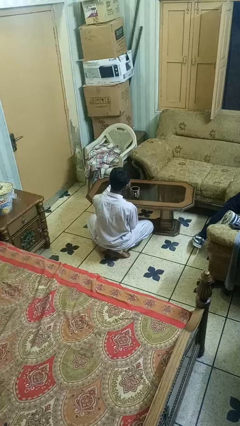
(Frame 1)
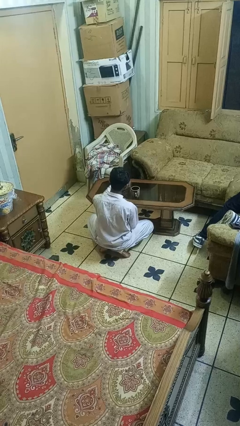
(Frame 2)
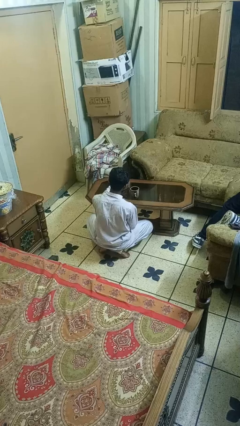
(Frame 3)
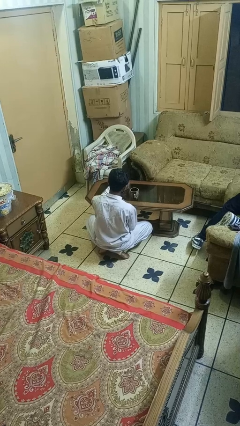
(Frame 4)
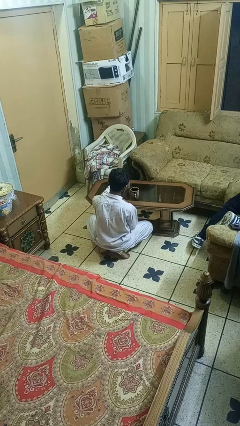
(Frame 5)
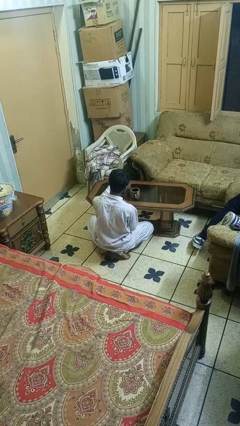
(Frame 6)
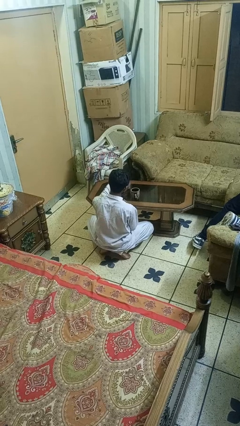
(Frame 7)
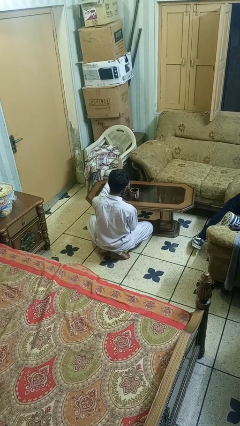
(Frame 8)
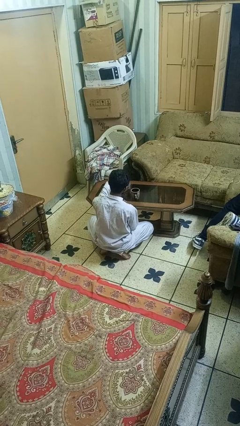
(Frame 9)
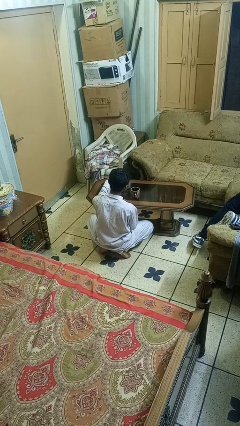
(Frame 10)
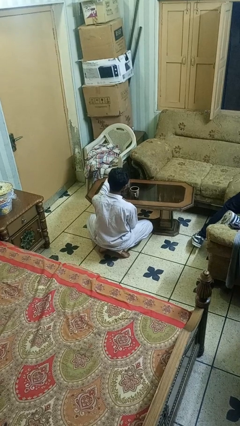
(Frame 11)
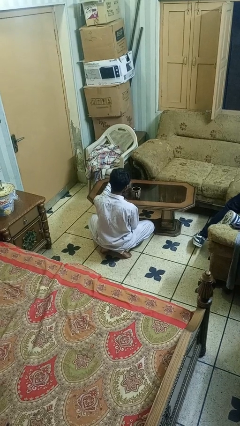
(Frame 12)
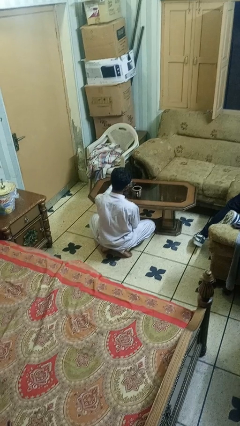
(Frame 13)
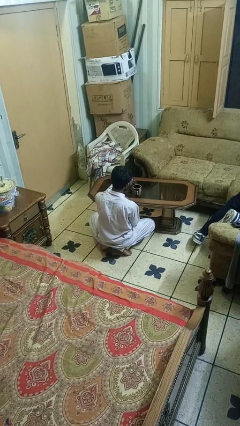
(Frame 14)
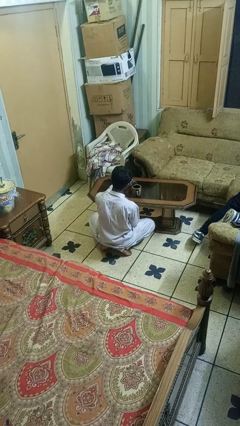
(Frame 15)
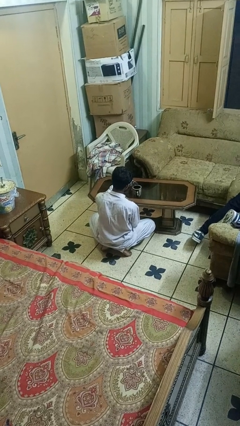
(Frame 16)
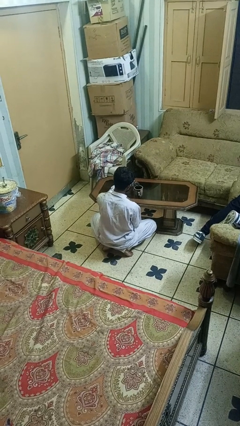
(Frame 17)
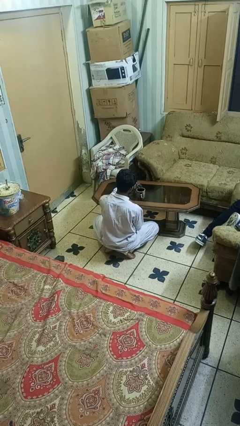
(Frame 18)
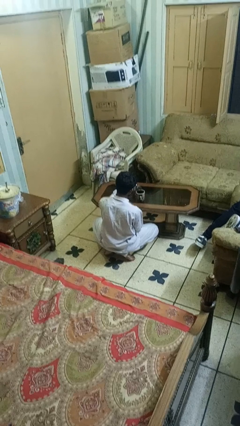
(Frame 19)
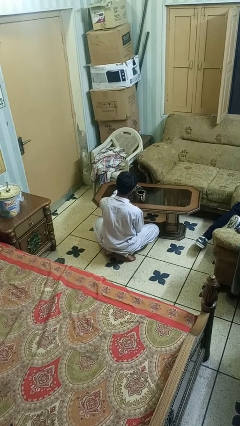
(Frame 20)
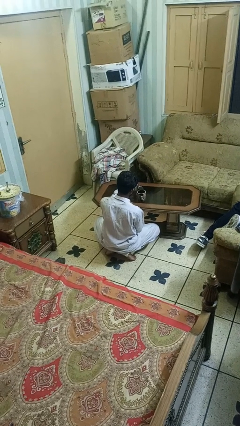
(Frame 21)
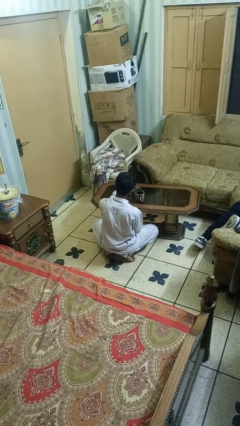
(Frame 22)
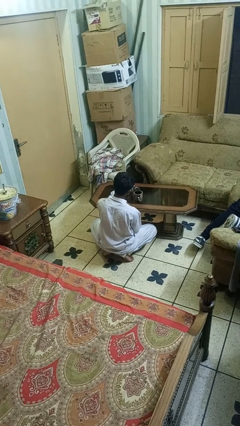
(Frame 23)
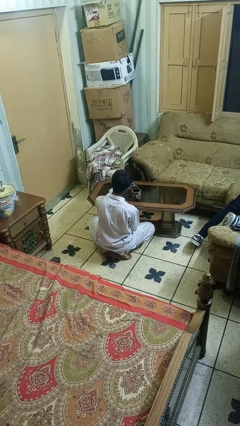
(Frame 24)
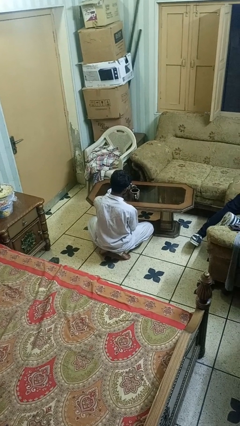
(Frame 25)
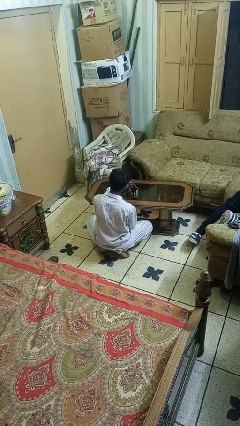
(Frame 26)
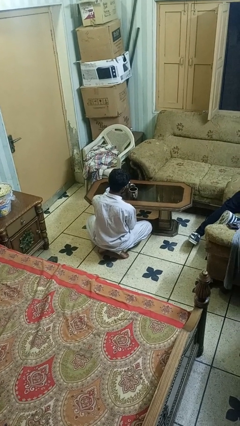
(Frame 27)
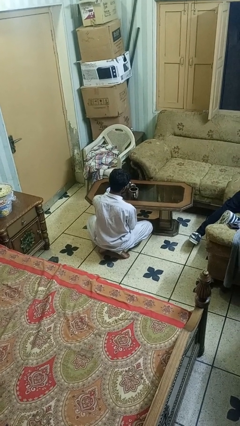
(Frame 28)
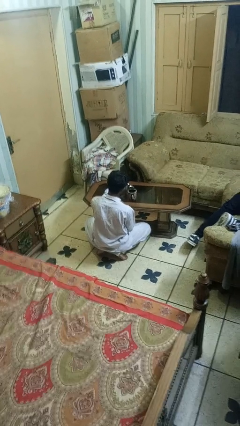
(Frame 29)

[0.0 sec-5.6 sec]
person pours coffee into mug

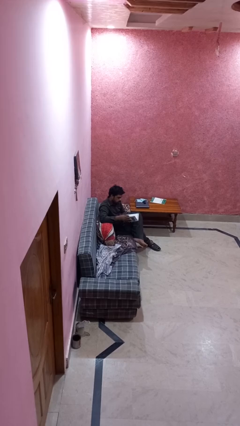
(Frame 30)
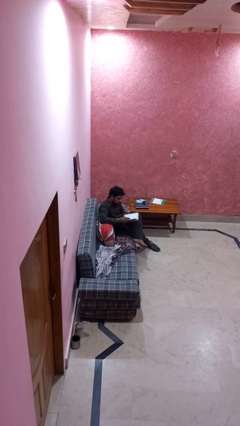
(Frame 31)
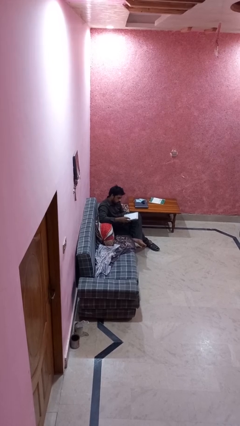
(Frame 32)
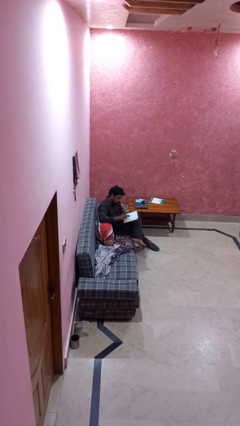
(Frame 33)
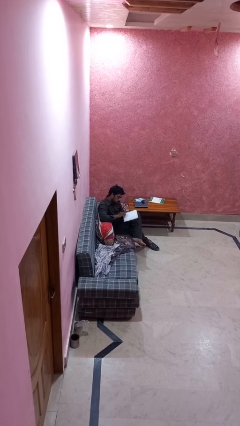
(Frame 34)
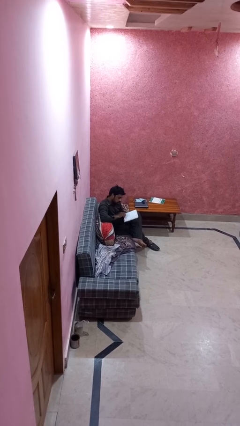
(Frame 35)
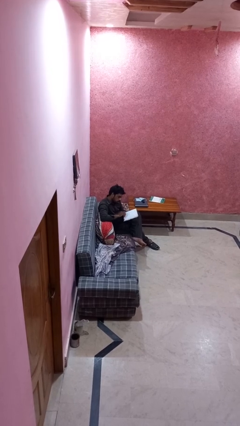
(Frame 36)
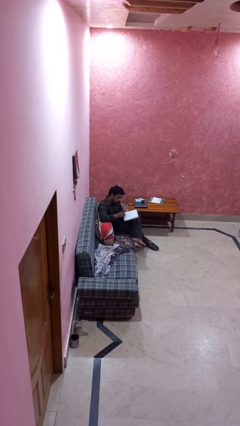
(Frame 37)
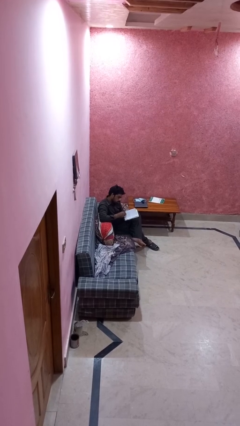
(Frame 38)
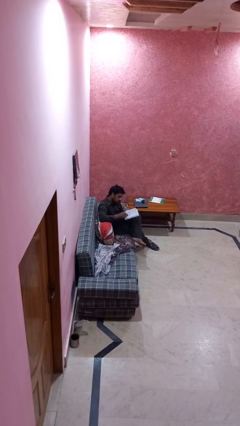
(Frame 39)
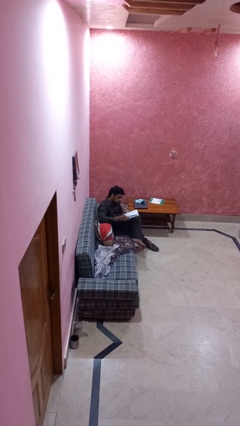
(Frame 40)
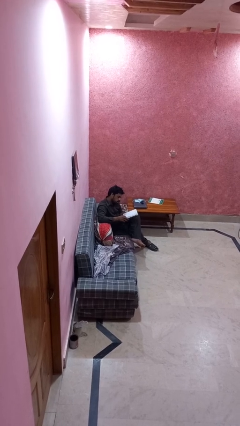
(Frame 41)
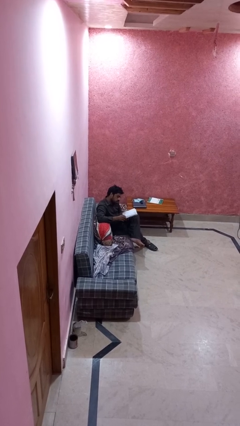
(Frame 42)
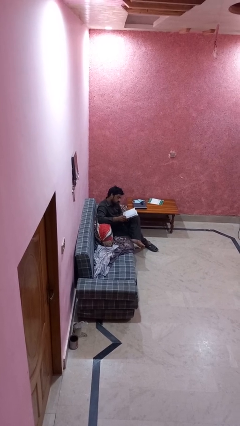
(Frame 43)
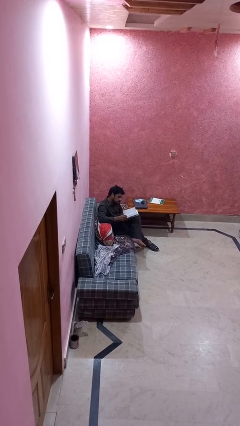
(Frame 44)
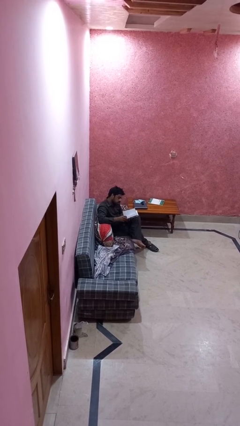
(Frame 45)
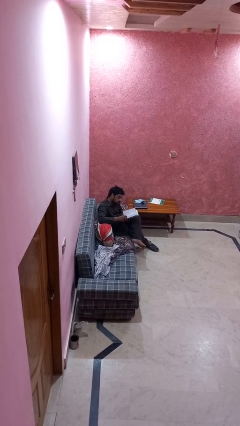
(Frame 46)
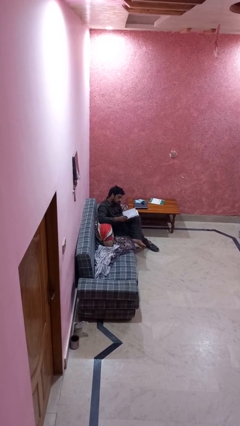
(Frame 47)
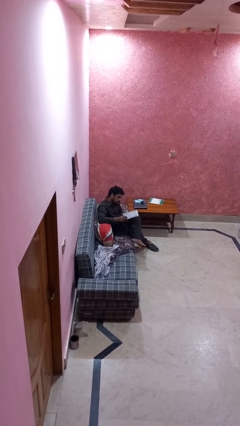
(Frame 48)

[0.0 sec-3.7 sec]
person reads book

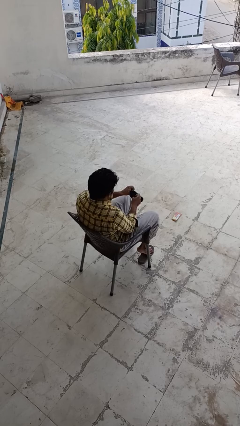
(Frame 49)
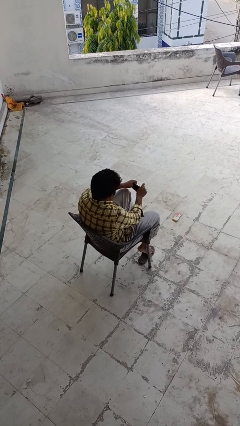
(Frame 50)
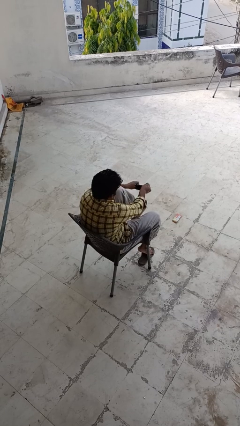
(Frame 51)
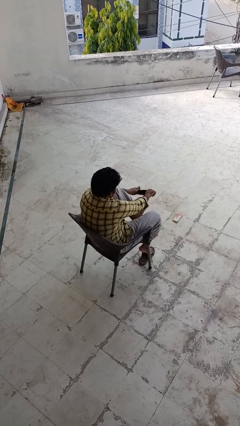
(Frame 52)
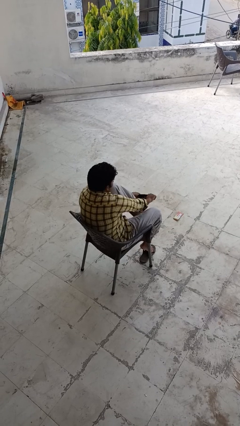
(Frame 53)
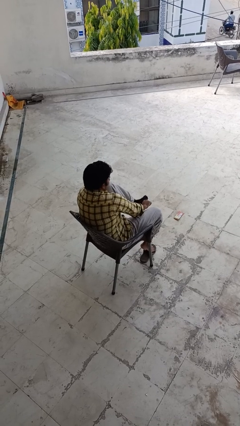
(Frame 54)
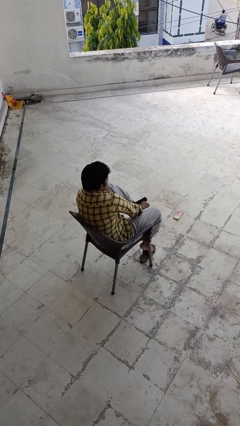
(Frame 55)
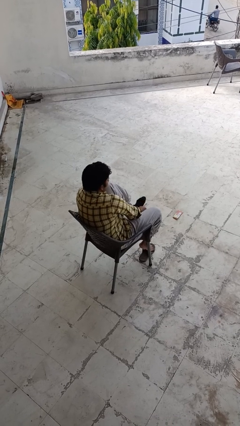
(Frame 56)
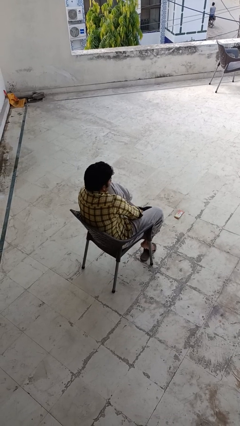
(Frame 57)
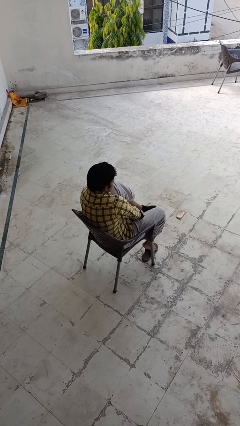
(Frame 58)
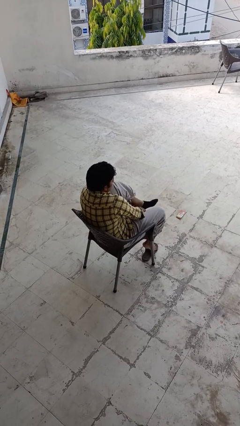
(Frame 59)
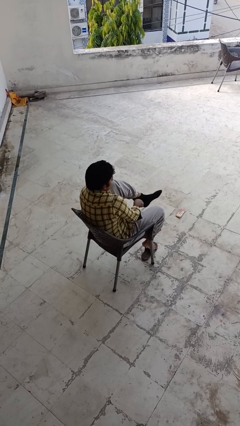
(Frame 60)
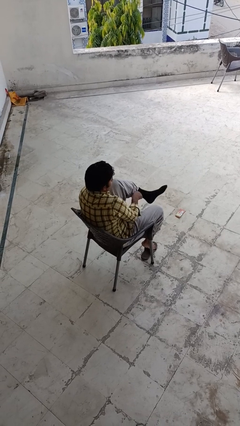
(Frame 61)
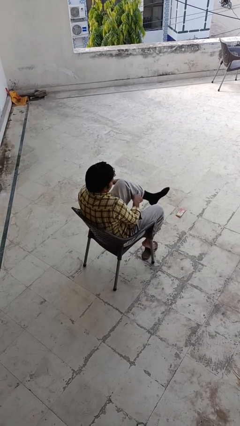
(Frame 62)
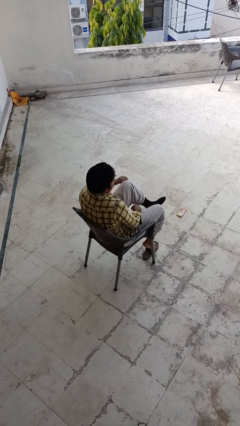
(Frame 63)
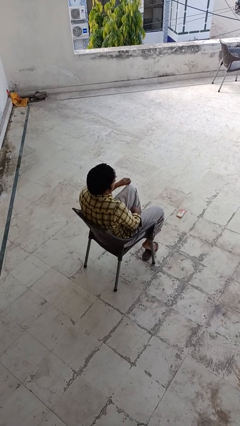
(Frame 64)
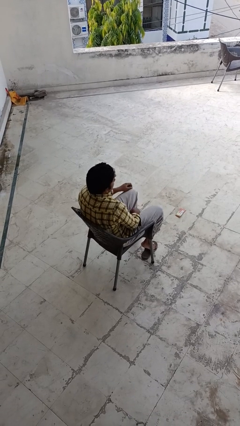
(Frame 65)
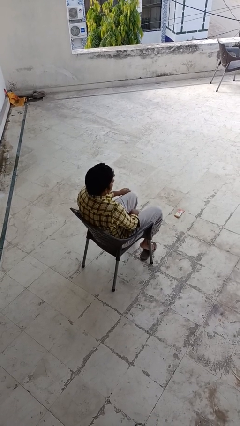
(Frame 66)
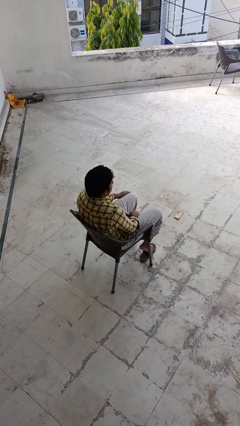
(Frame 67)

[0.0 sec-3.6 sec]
person puts on socks

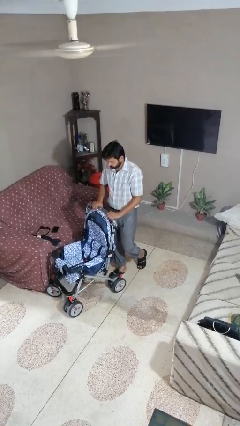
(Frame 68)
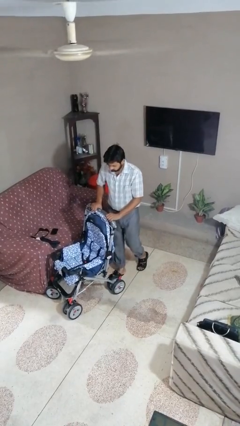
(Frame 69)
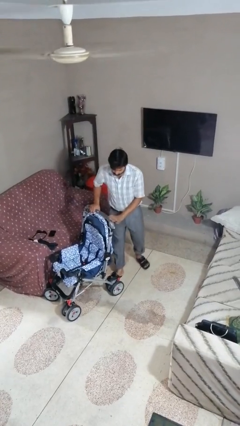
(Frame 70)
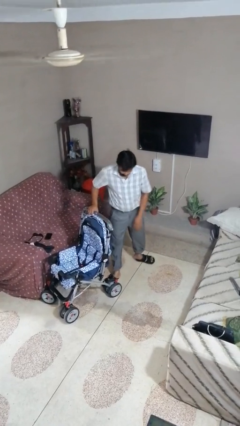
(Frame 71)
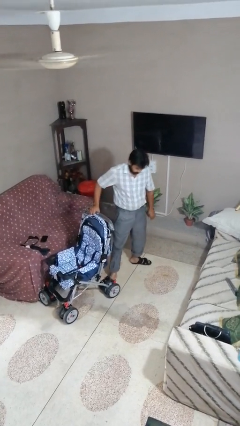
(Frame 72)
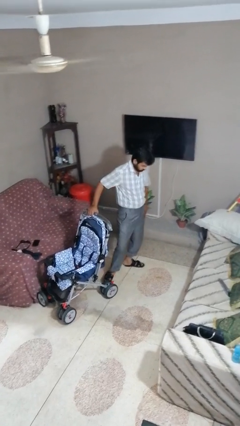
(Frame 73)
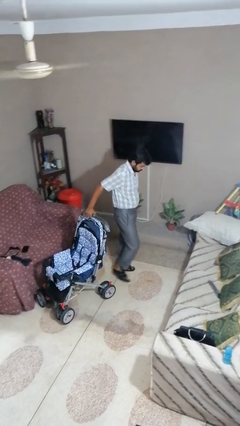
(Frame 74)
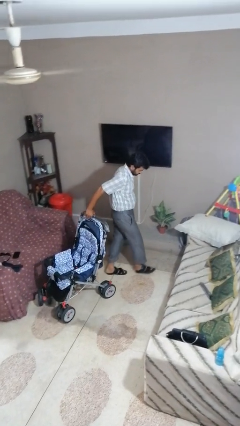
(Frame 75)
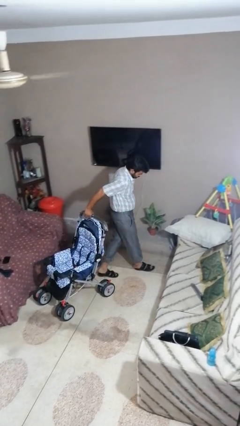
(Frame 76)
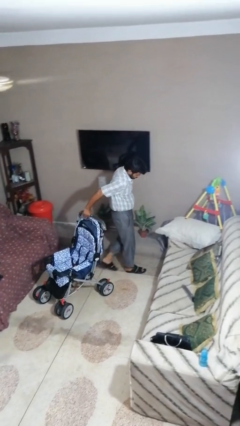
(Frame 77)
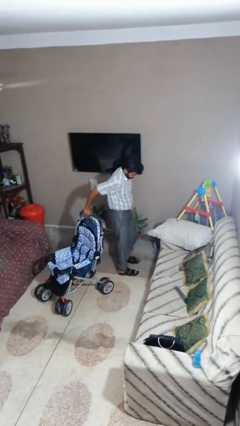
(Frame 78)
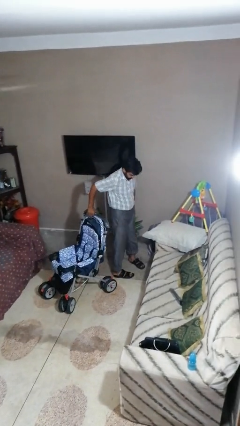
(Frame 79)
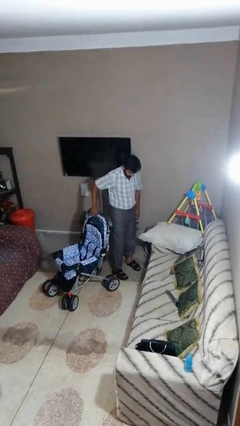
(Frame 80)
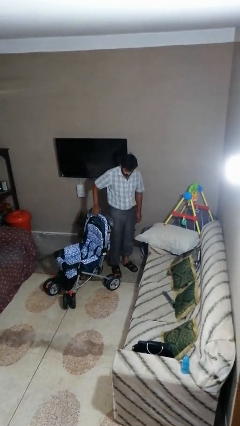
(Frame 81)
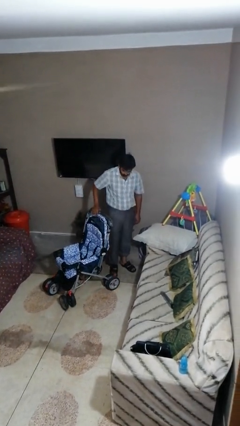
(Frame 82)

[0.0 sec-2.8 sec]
person pulls wheeled cart

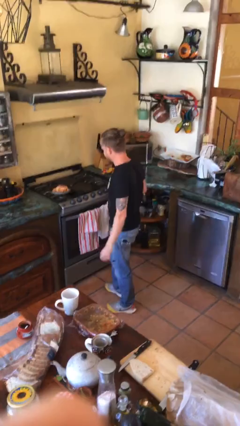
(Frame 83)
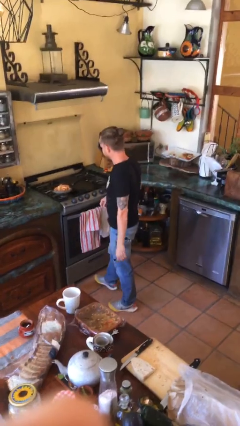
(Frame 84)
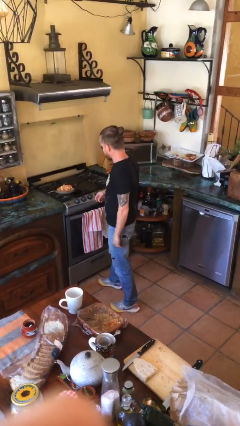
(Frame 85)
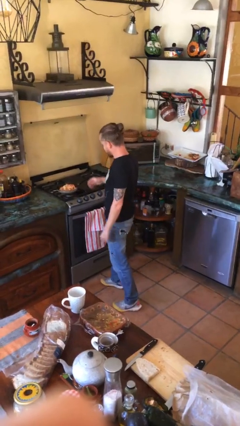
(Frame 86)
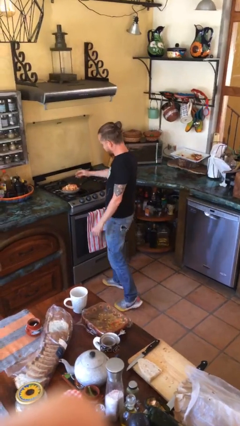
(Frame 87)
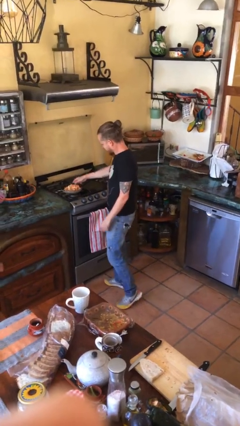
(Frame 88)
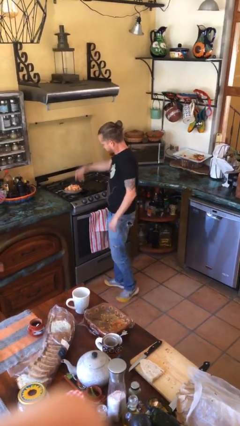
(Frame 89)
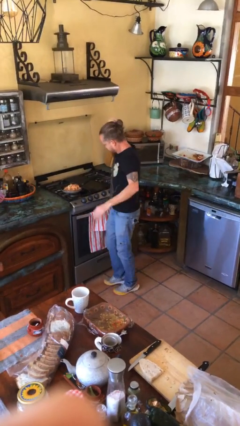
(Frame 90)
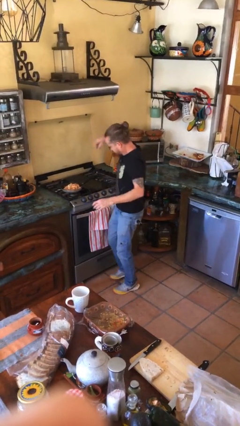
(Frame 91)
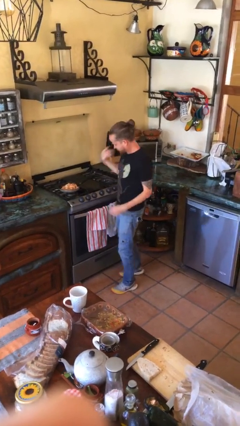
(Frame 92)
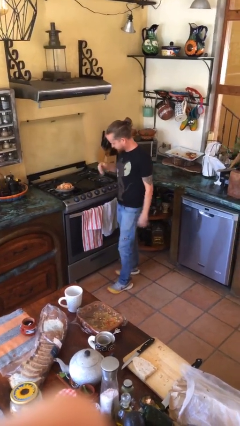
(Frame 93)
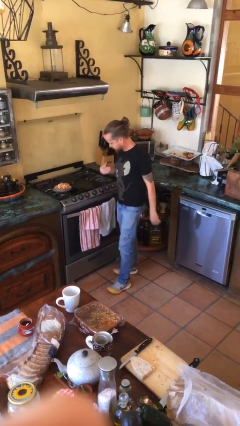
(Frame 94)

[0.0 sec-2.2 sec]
person burns hand
